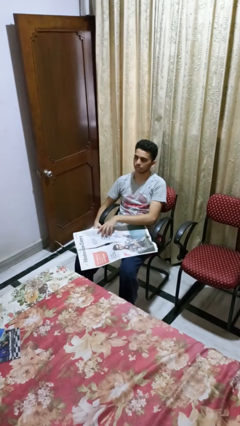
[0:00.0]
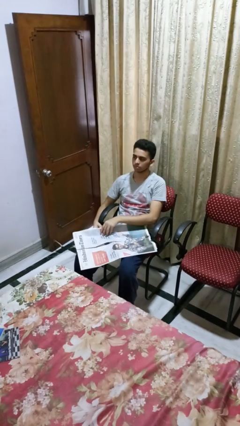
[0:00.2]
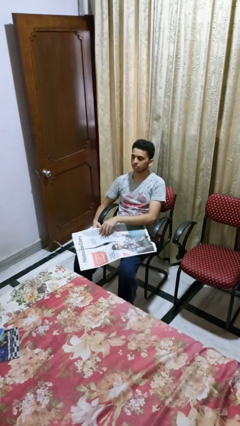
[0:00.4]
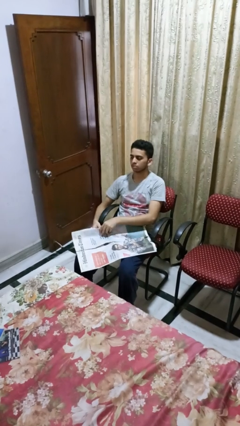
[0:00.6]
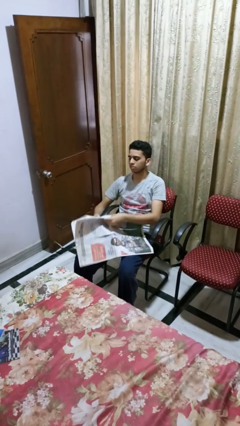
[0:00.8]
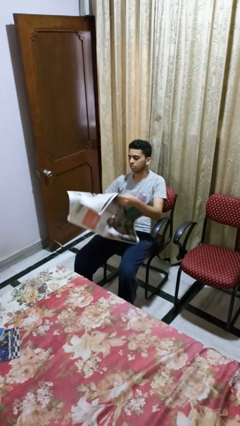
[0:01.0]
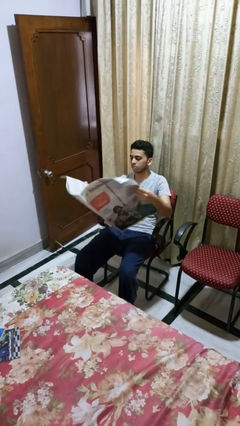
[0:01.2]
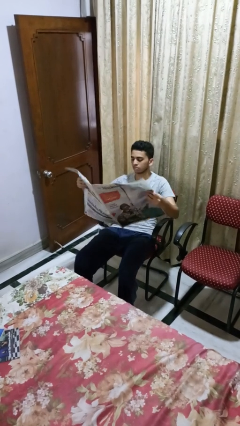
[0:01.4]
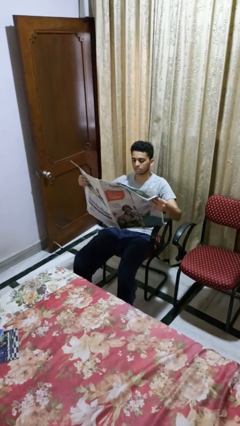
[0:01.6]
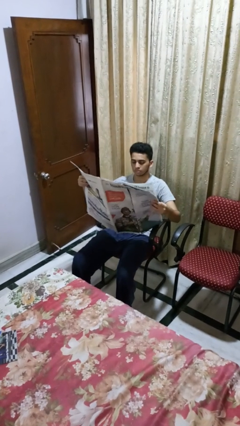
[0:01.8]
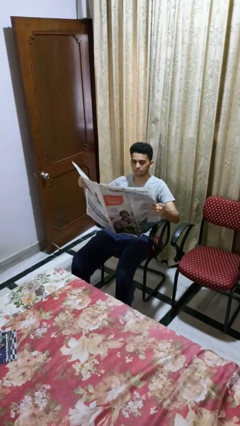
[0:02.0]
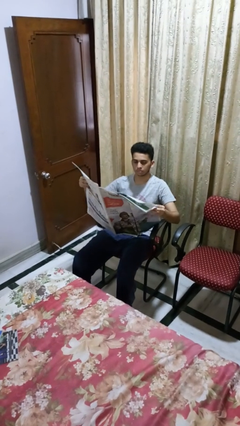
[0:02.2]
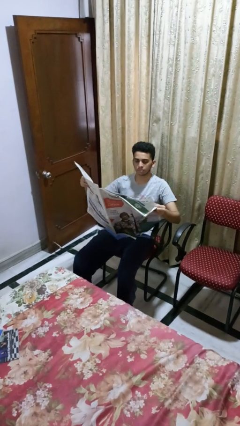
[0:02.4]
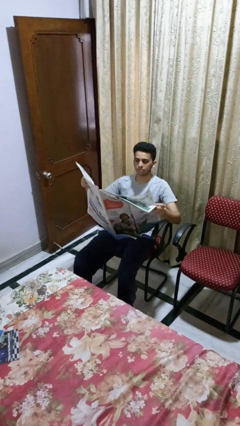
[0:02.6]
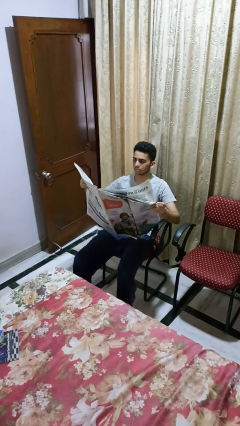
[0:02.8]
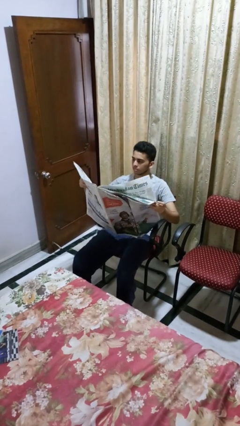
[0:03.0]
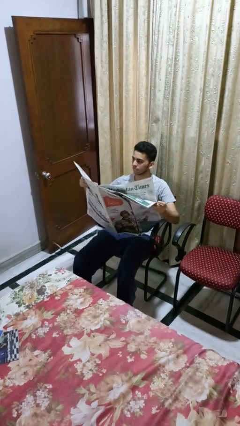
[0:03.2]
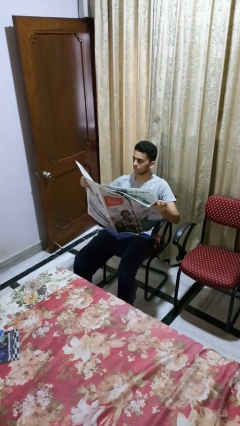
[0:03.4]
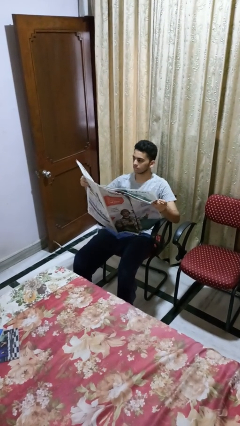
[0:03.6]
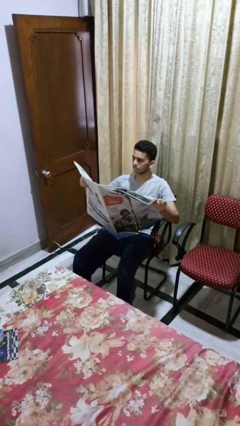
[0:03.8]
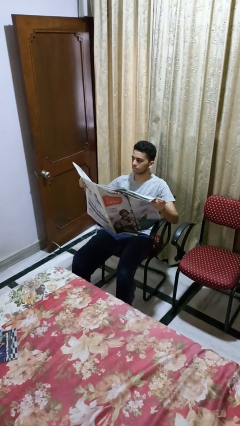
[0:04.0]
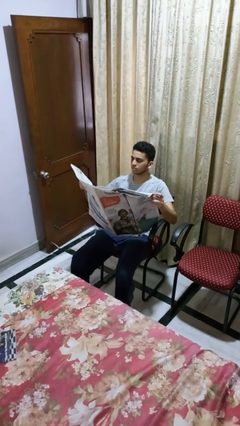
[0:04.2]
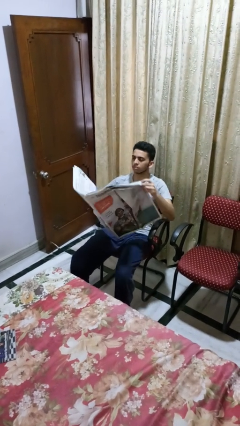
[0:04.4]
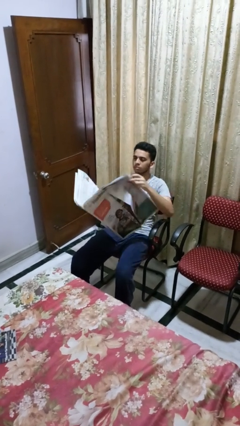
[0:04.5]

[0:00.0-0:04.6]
person reads newspaper

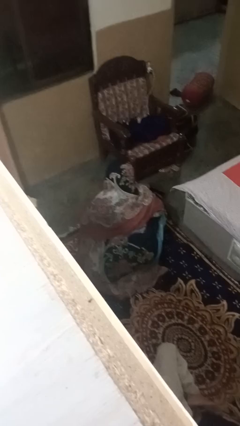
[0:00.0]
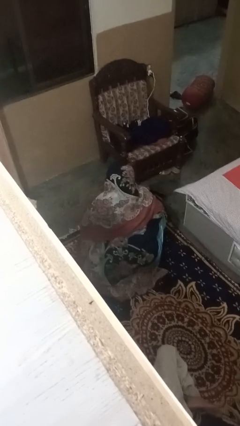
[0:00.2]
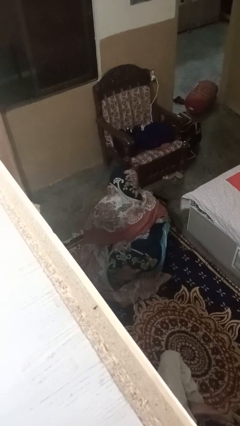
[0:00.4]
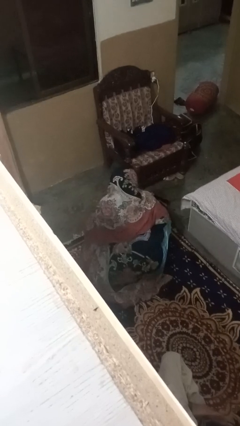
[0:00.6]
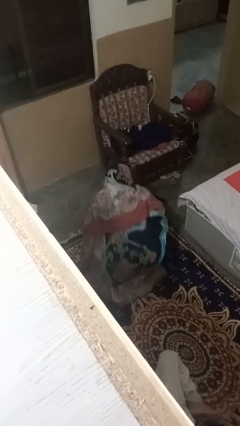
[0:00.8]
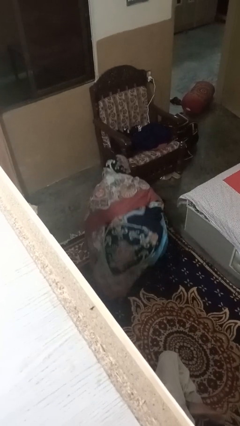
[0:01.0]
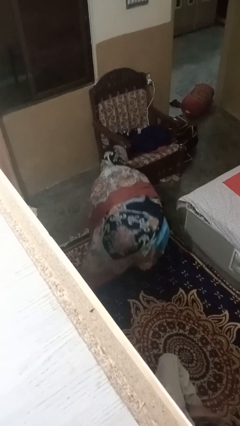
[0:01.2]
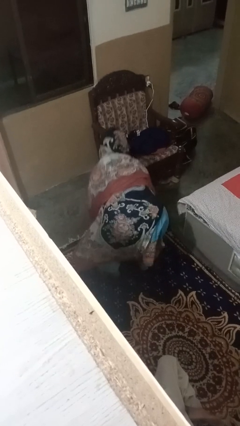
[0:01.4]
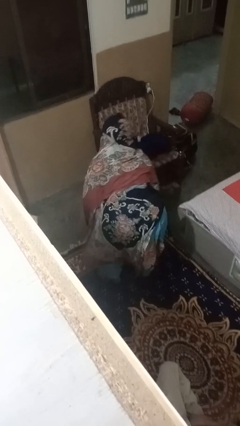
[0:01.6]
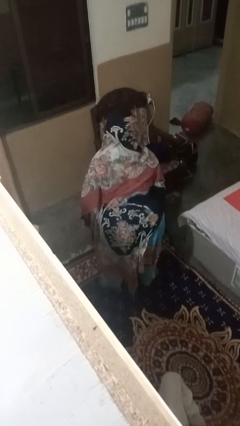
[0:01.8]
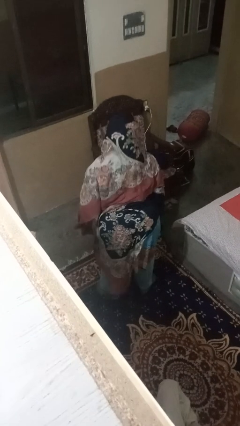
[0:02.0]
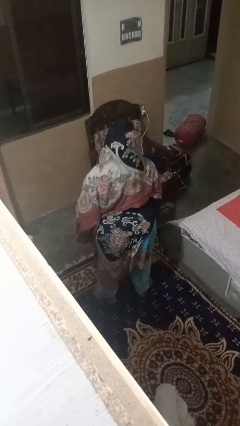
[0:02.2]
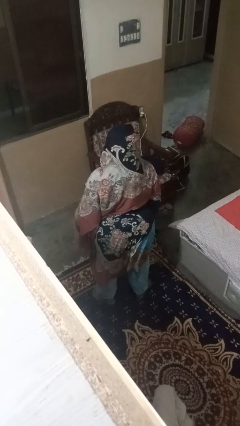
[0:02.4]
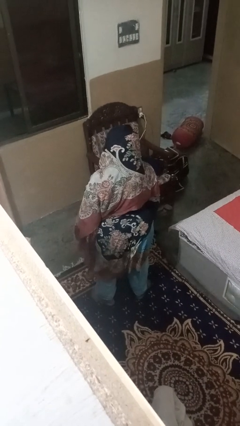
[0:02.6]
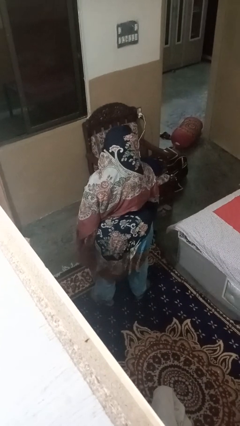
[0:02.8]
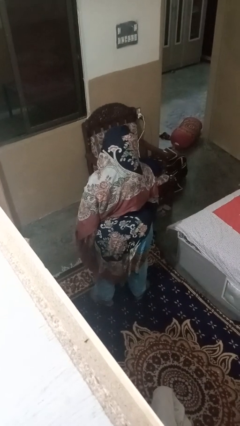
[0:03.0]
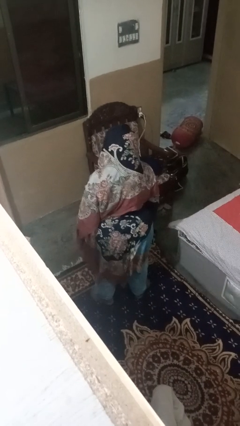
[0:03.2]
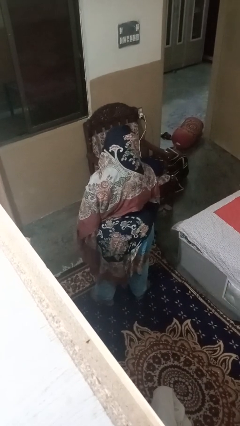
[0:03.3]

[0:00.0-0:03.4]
person stands up

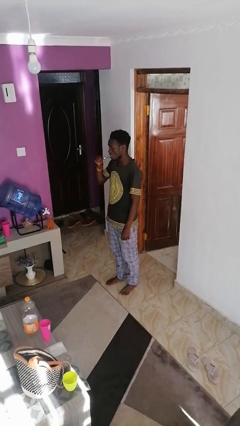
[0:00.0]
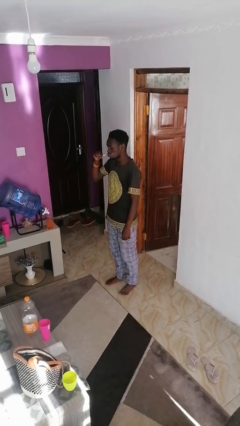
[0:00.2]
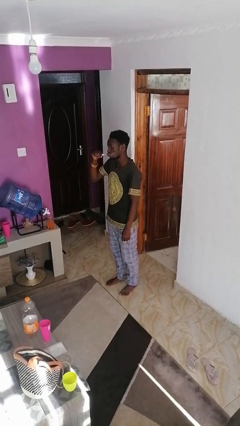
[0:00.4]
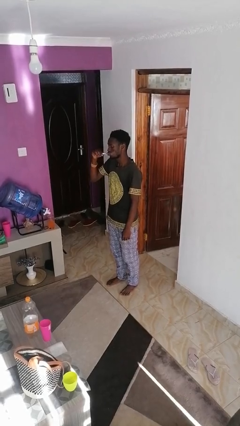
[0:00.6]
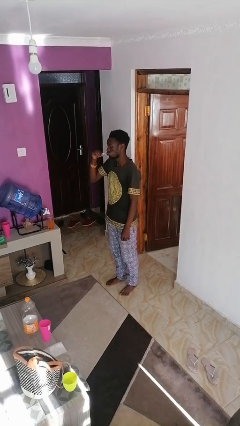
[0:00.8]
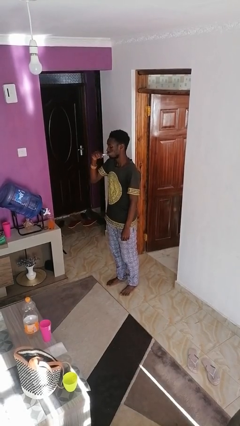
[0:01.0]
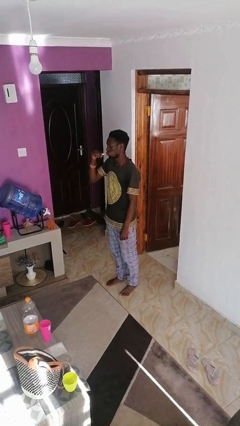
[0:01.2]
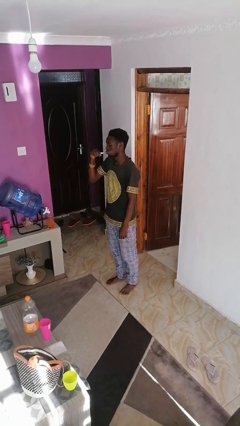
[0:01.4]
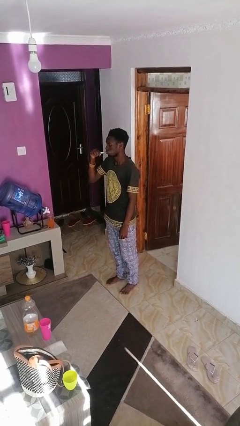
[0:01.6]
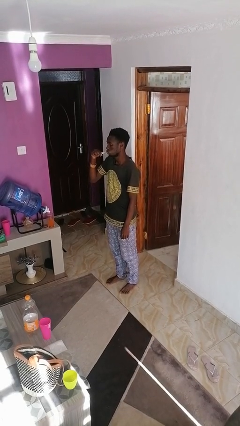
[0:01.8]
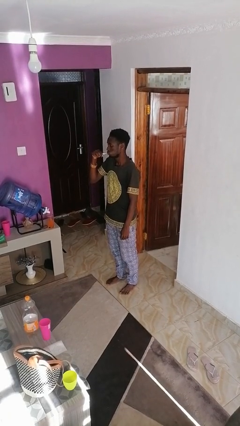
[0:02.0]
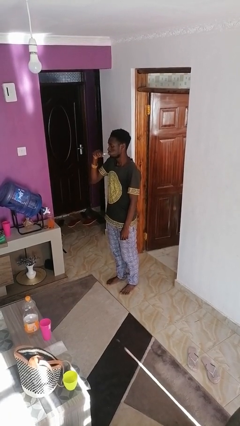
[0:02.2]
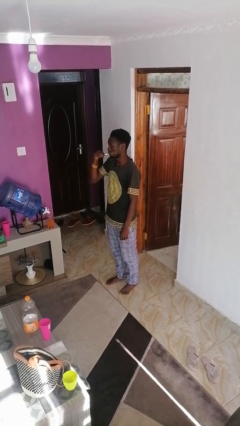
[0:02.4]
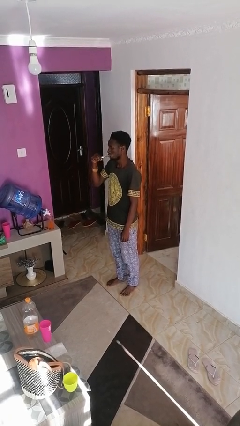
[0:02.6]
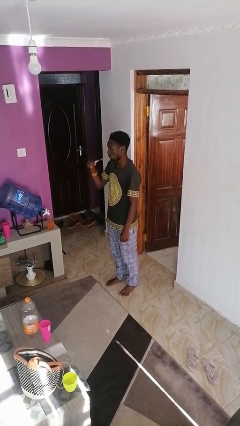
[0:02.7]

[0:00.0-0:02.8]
person brushes teeth

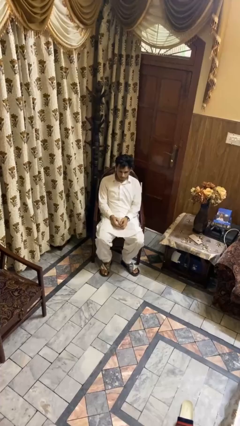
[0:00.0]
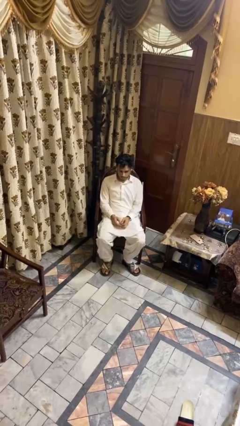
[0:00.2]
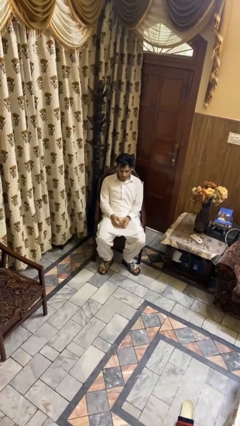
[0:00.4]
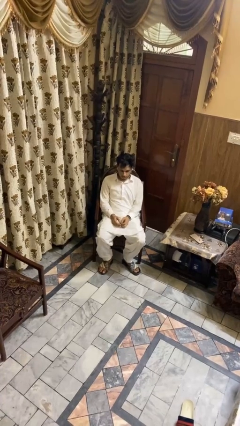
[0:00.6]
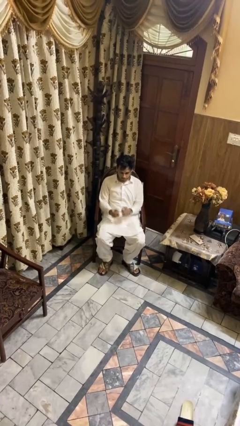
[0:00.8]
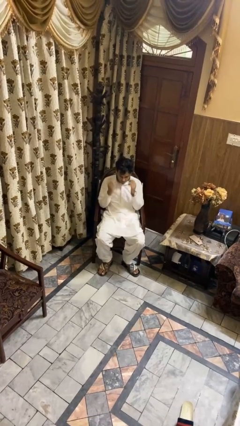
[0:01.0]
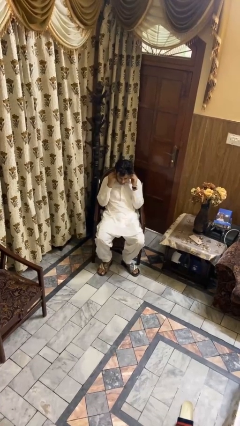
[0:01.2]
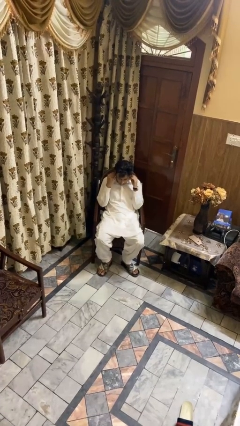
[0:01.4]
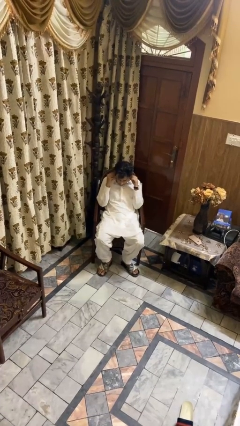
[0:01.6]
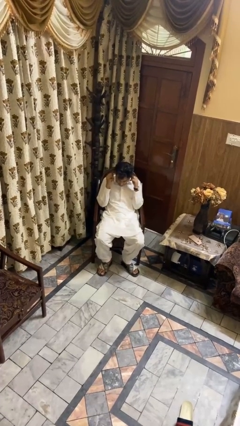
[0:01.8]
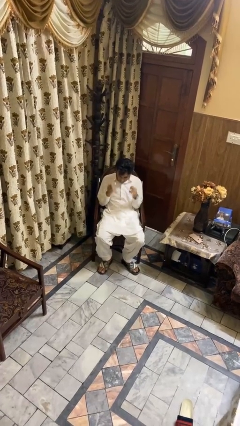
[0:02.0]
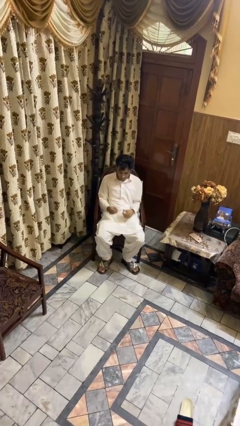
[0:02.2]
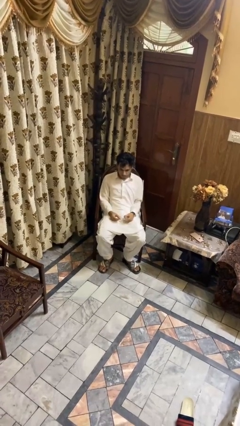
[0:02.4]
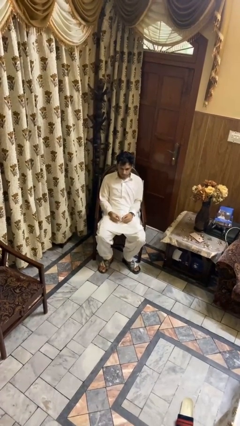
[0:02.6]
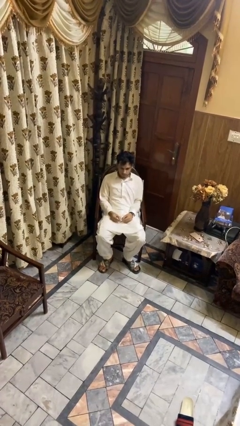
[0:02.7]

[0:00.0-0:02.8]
person takes off headphones

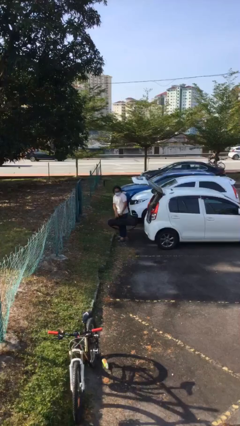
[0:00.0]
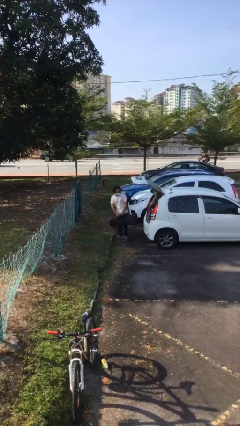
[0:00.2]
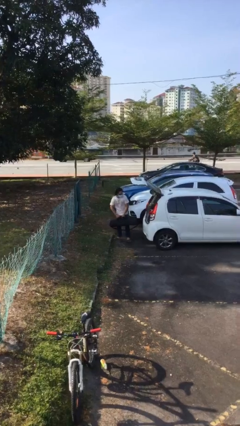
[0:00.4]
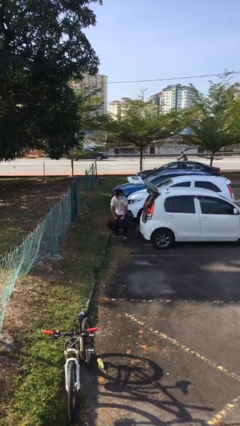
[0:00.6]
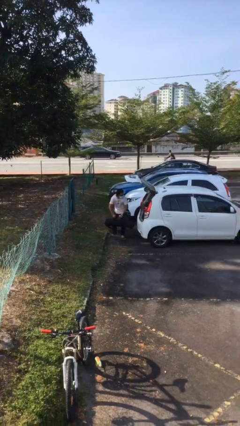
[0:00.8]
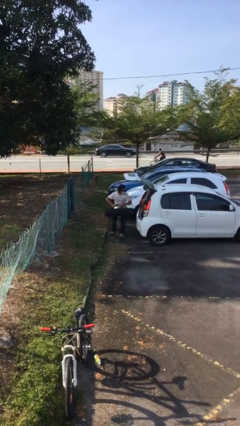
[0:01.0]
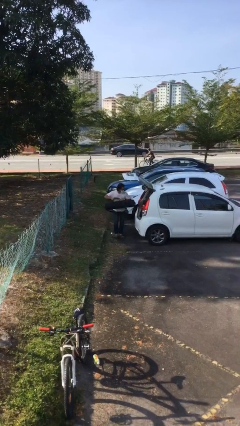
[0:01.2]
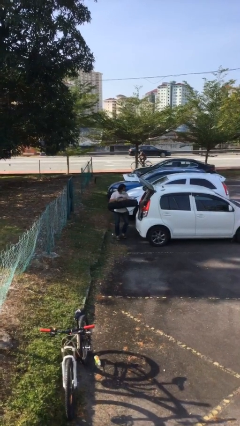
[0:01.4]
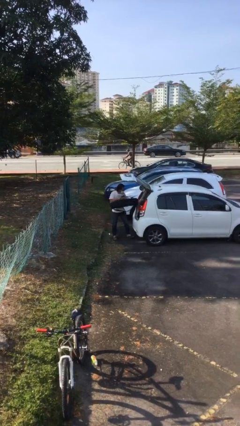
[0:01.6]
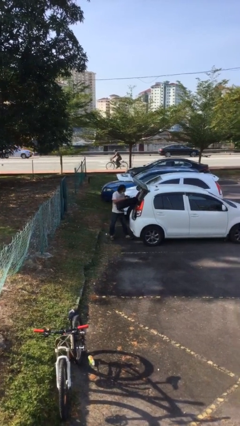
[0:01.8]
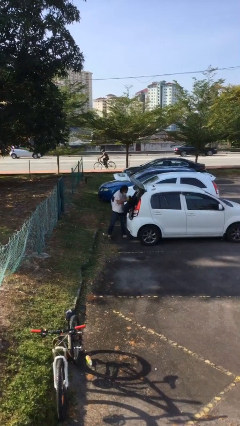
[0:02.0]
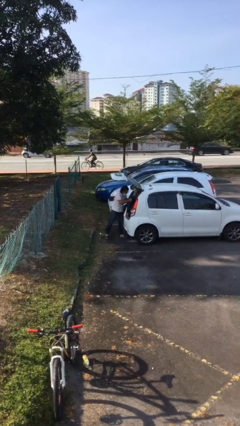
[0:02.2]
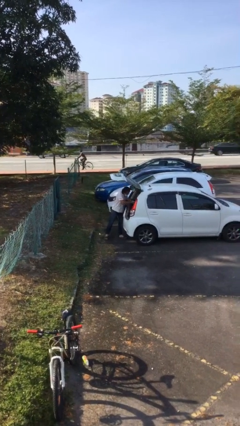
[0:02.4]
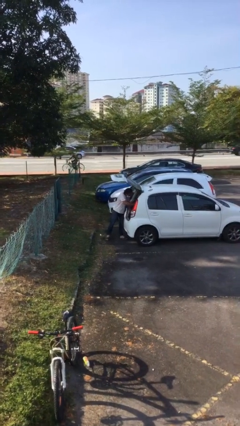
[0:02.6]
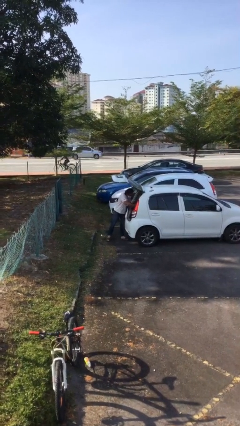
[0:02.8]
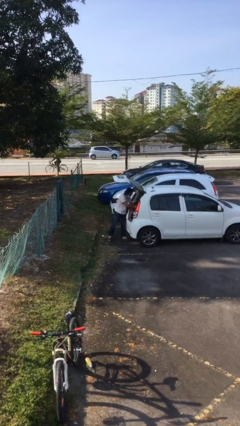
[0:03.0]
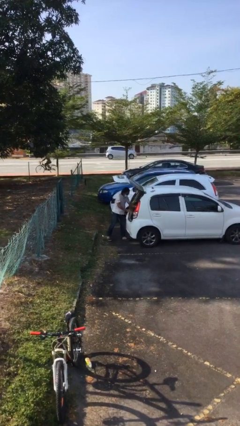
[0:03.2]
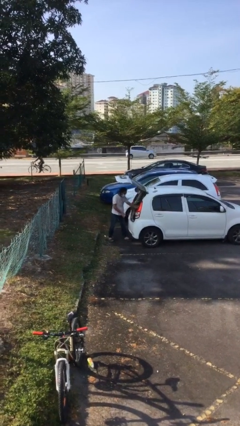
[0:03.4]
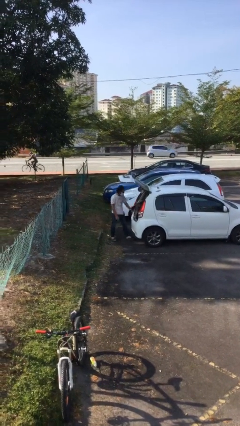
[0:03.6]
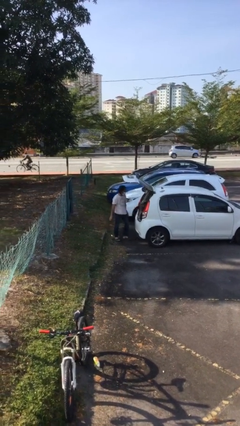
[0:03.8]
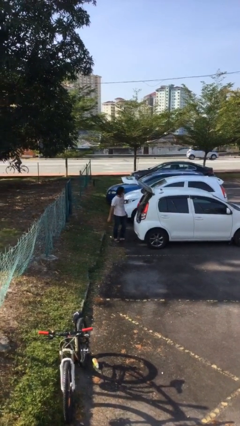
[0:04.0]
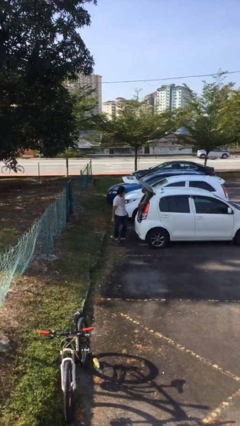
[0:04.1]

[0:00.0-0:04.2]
person loads car
